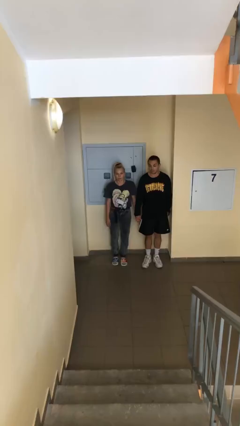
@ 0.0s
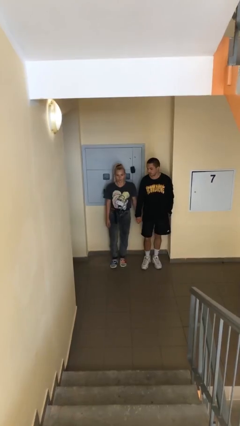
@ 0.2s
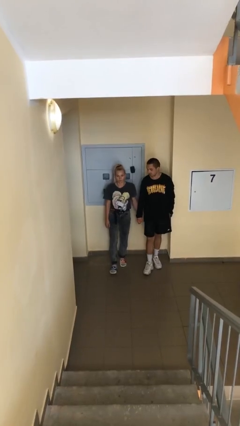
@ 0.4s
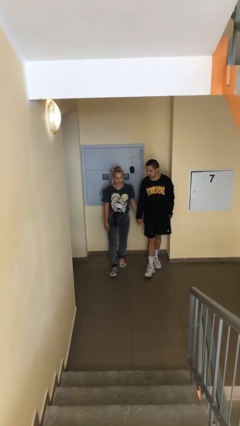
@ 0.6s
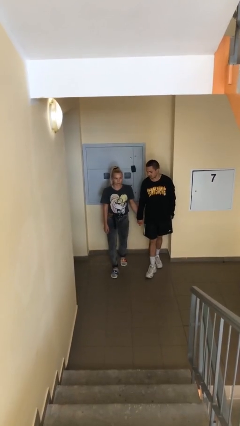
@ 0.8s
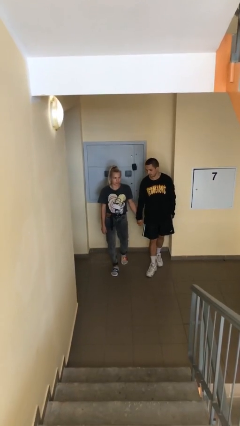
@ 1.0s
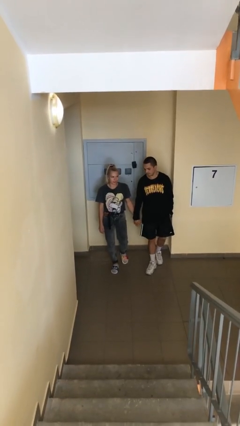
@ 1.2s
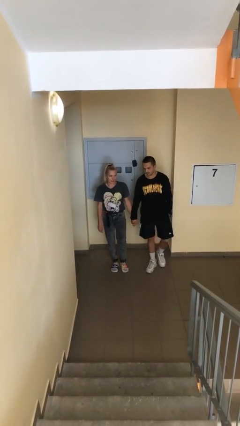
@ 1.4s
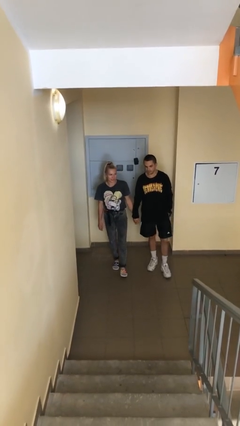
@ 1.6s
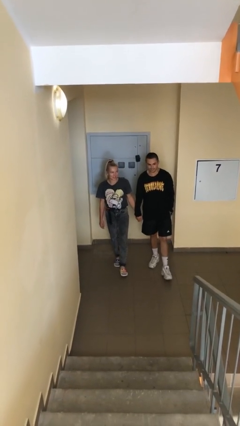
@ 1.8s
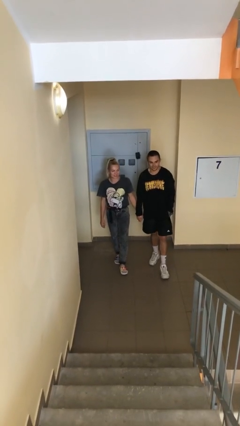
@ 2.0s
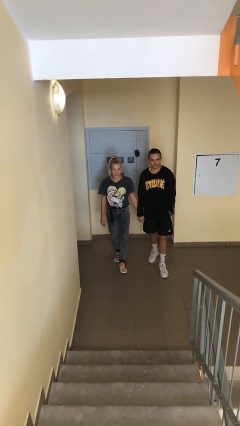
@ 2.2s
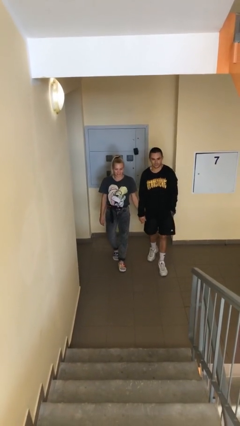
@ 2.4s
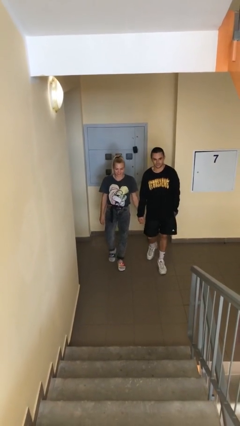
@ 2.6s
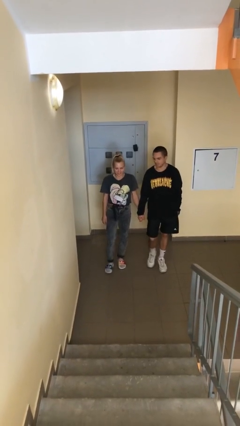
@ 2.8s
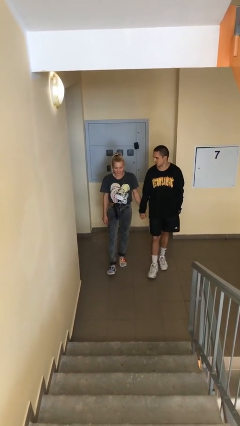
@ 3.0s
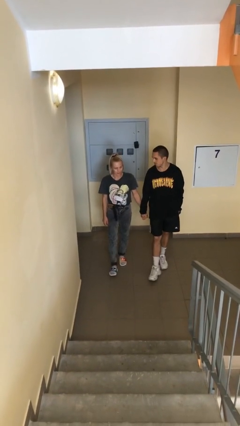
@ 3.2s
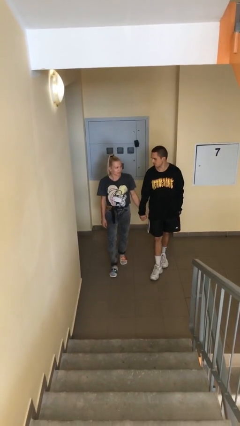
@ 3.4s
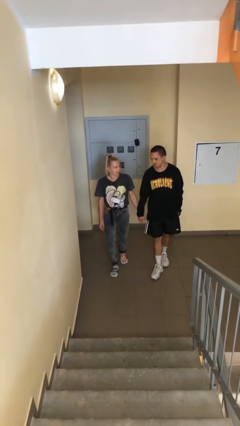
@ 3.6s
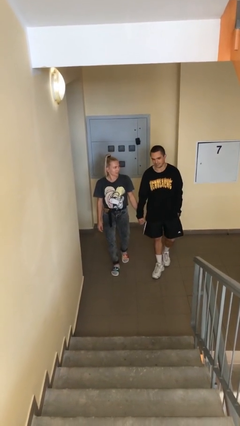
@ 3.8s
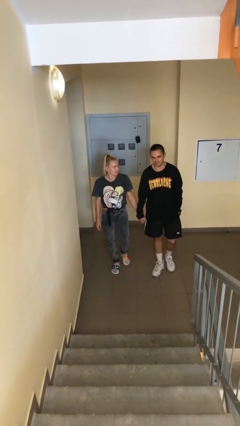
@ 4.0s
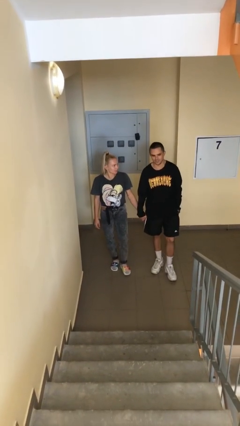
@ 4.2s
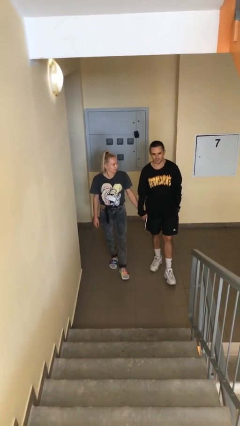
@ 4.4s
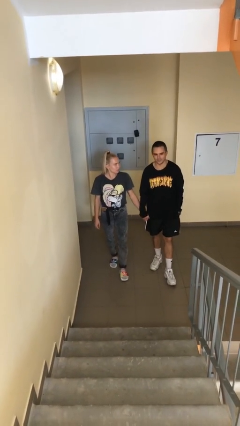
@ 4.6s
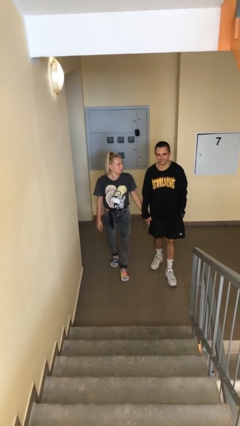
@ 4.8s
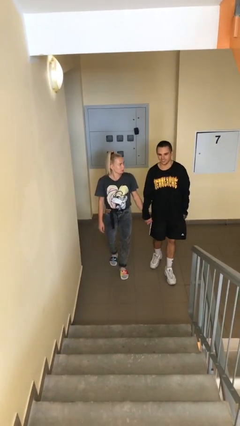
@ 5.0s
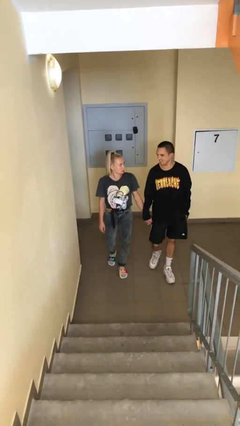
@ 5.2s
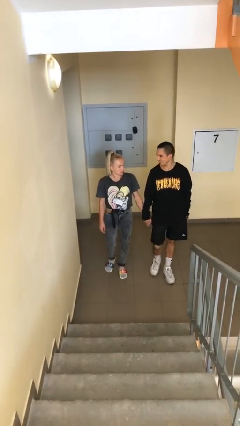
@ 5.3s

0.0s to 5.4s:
person holds hand

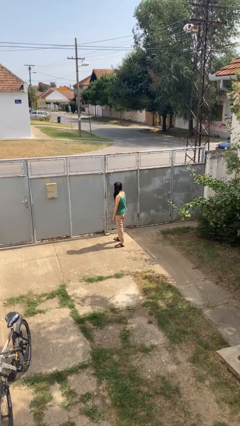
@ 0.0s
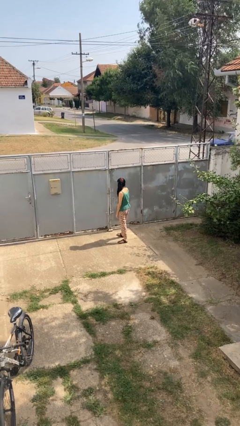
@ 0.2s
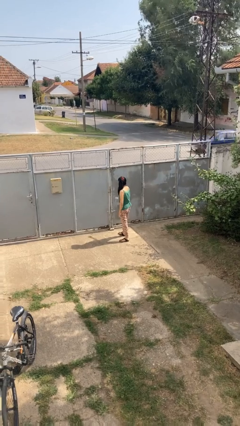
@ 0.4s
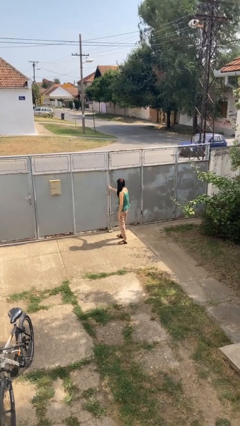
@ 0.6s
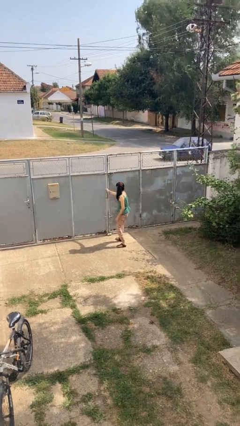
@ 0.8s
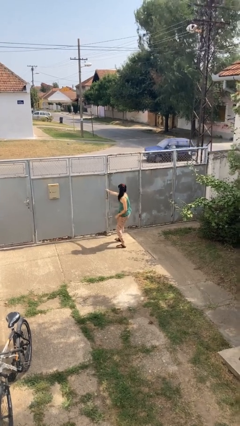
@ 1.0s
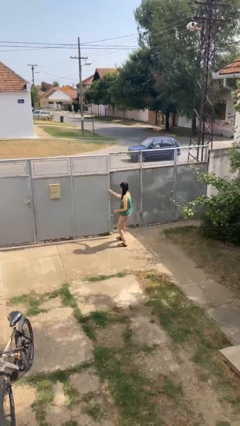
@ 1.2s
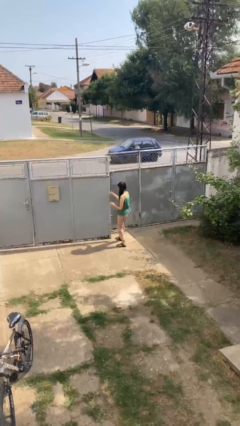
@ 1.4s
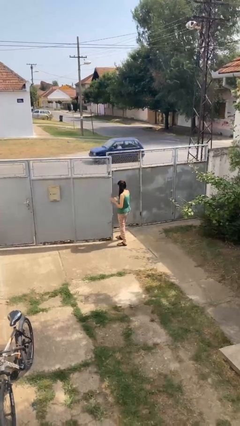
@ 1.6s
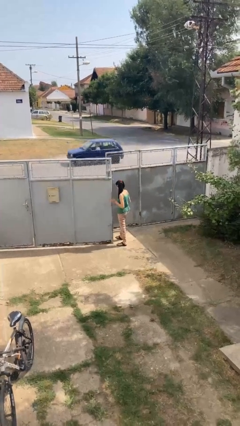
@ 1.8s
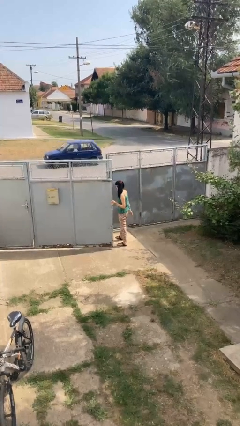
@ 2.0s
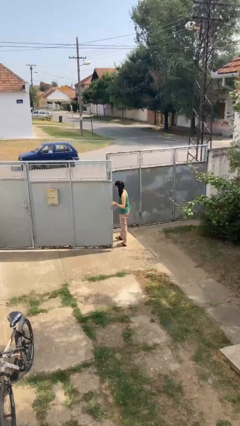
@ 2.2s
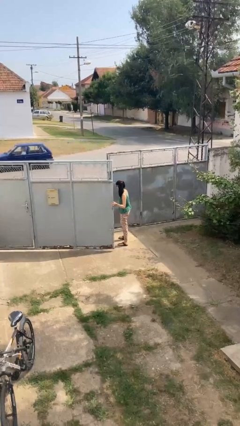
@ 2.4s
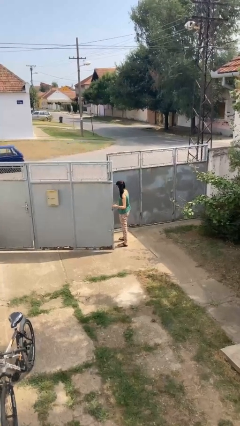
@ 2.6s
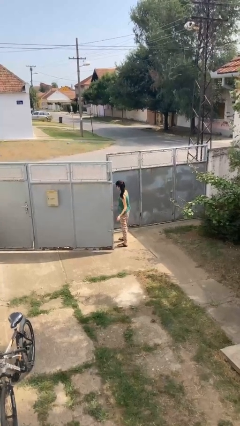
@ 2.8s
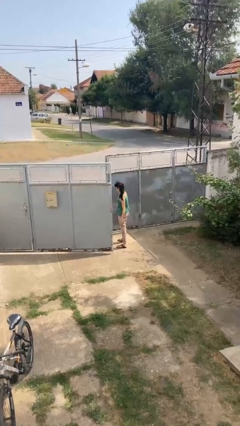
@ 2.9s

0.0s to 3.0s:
person opens gate

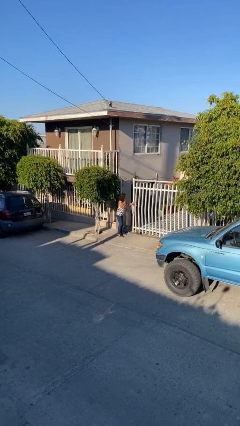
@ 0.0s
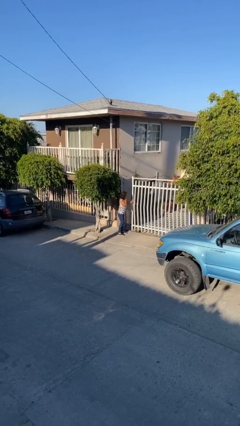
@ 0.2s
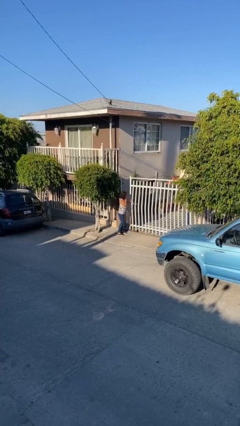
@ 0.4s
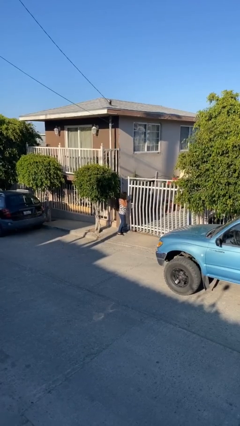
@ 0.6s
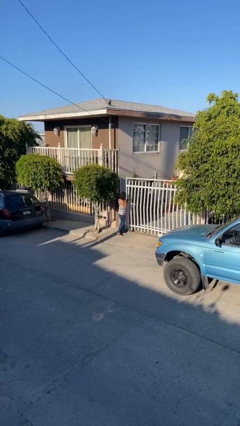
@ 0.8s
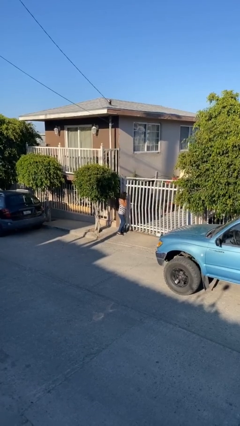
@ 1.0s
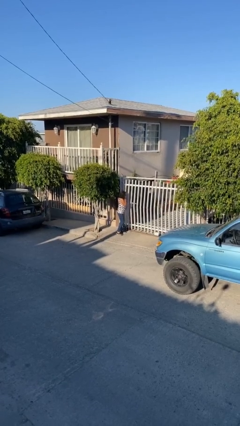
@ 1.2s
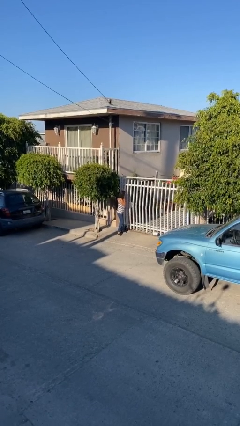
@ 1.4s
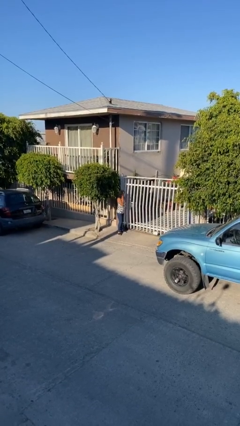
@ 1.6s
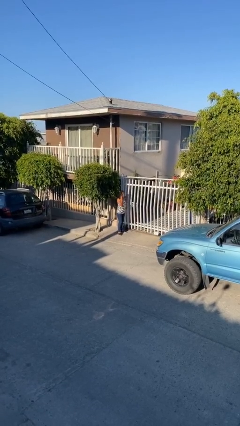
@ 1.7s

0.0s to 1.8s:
person closes facility door

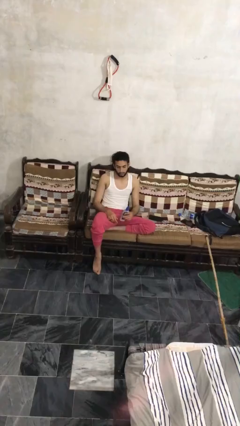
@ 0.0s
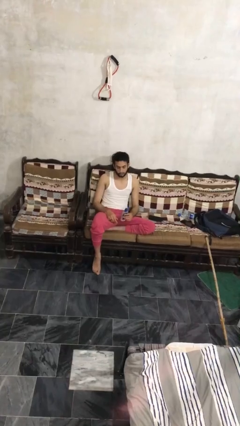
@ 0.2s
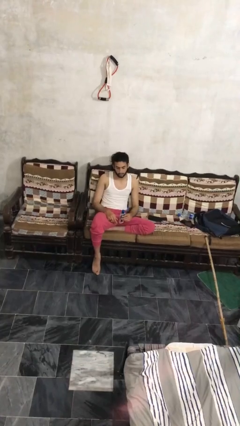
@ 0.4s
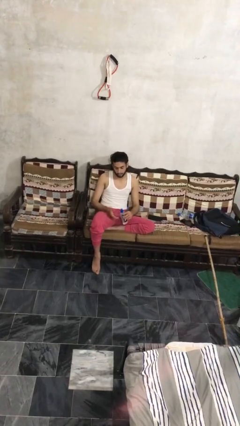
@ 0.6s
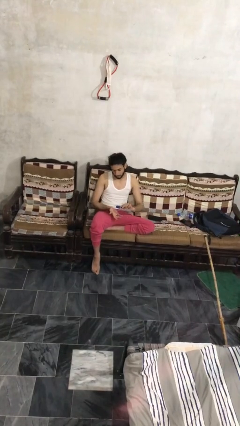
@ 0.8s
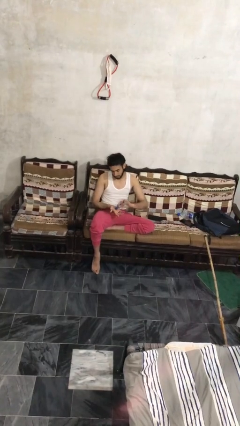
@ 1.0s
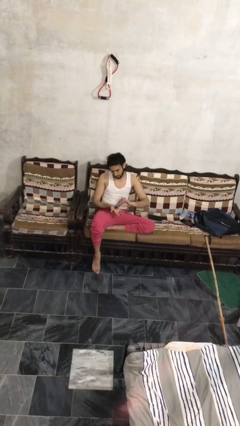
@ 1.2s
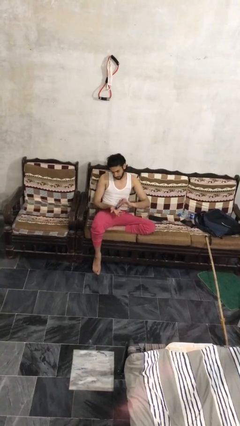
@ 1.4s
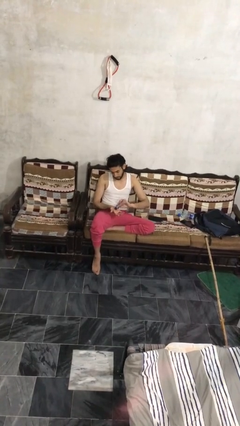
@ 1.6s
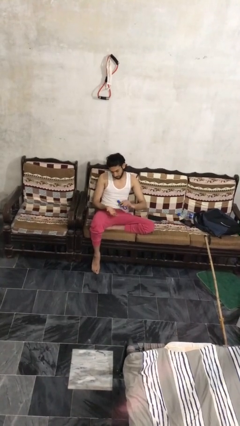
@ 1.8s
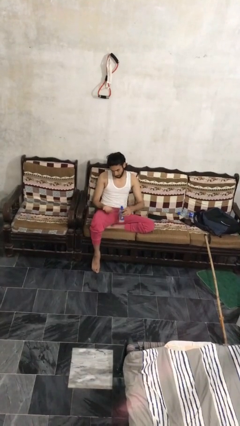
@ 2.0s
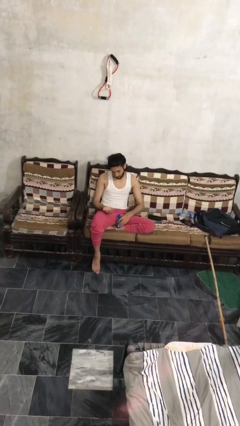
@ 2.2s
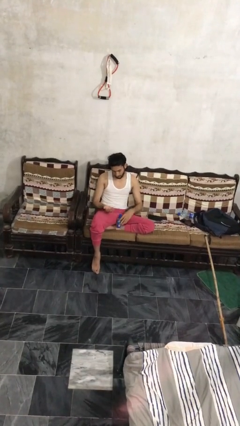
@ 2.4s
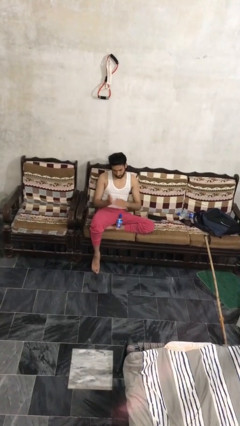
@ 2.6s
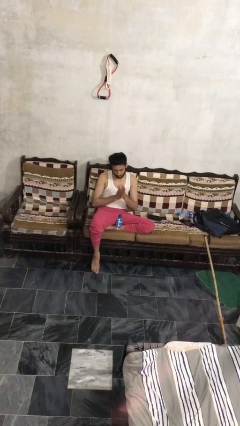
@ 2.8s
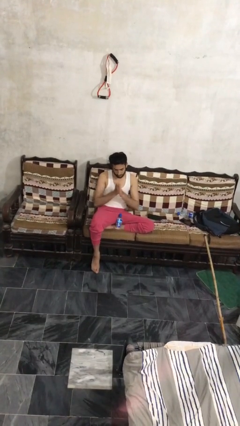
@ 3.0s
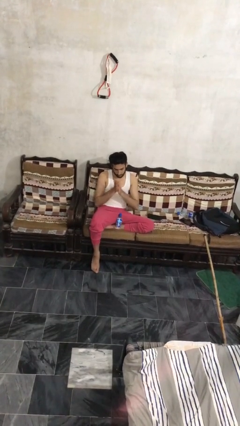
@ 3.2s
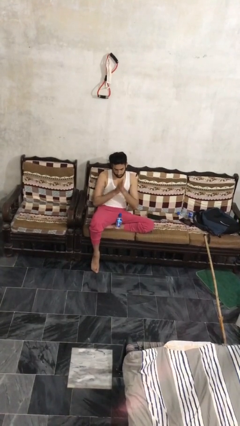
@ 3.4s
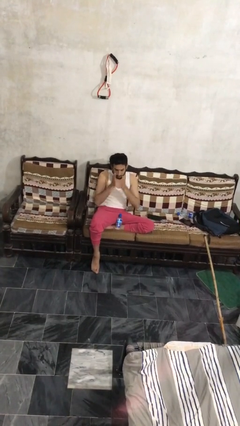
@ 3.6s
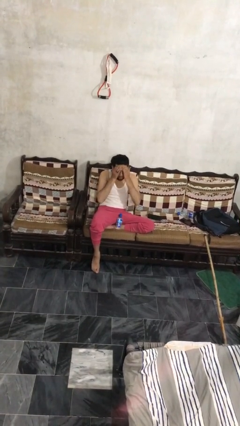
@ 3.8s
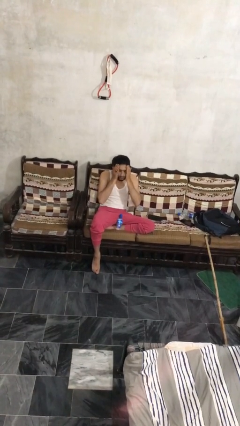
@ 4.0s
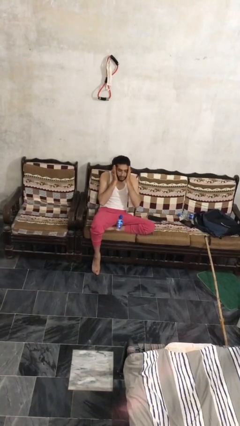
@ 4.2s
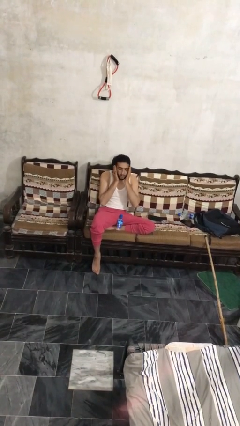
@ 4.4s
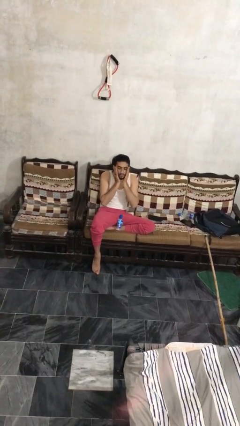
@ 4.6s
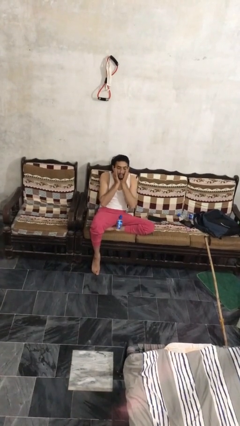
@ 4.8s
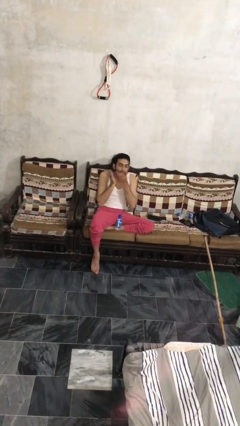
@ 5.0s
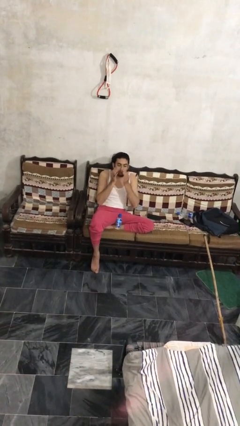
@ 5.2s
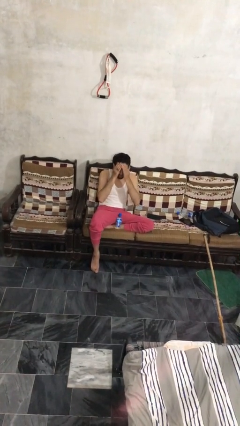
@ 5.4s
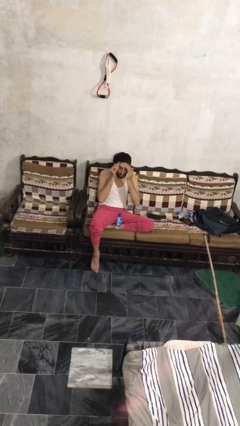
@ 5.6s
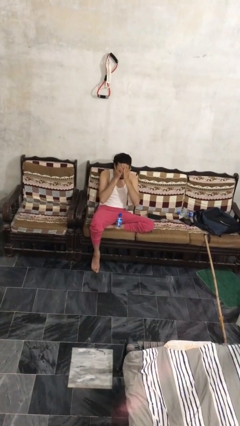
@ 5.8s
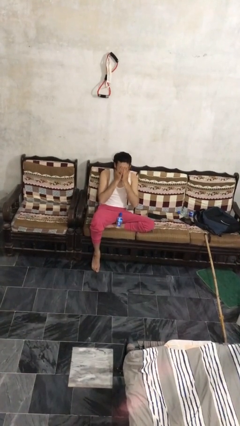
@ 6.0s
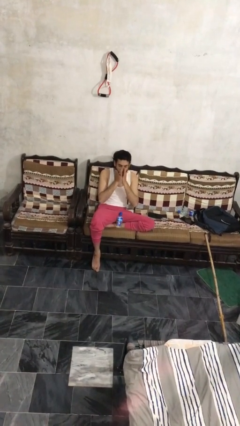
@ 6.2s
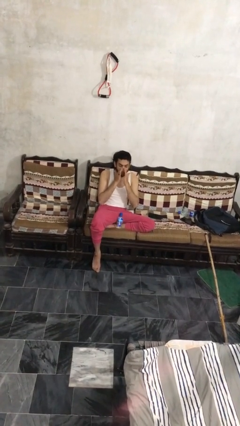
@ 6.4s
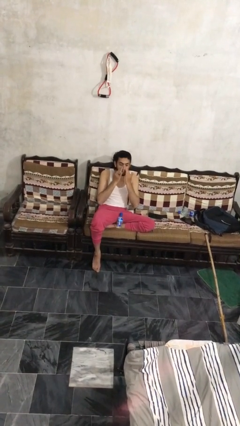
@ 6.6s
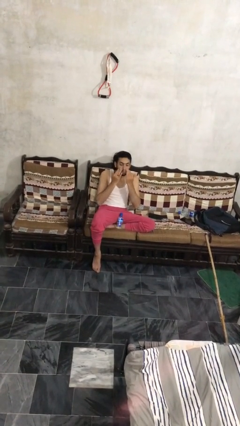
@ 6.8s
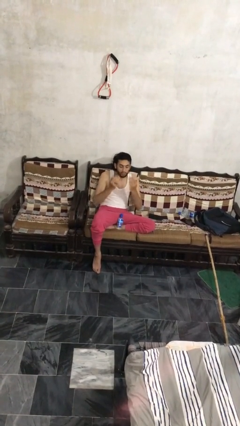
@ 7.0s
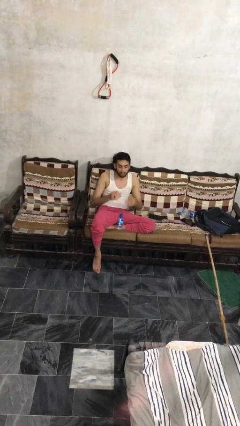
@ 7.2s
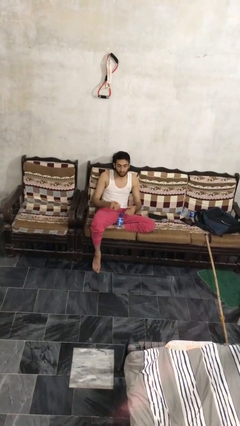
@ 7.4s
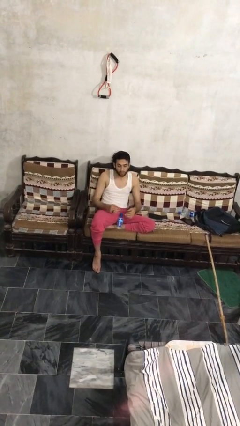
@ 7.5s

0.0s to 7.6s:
person applies facial moisturizer
